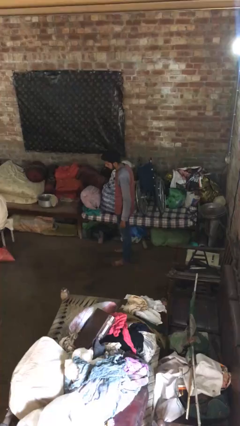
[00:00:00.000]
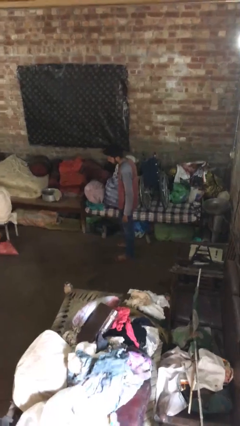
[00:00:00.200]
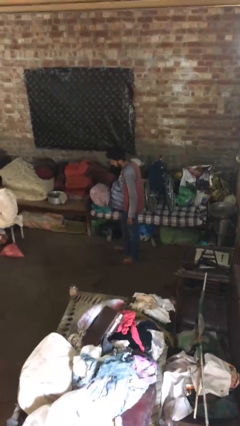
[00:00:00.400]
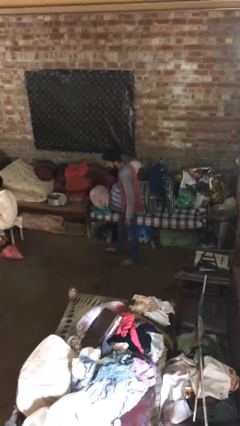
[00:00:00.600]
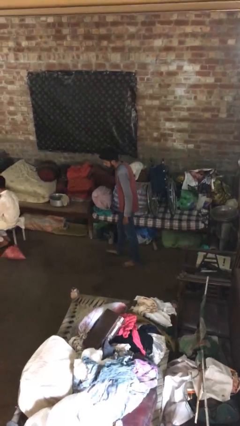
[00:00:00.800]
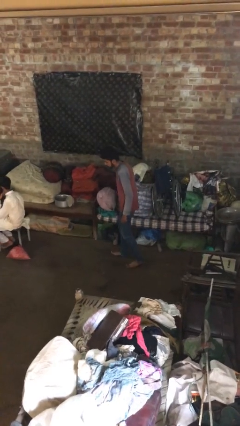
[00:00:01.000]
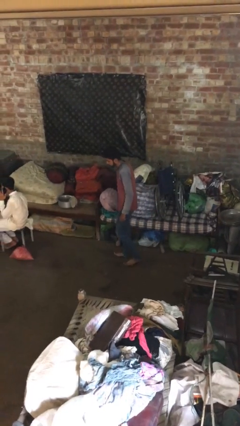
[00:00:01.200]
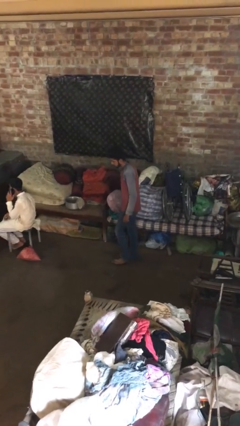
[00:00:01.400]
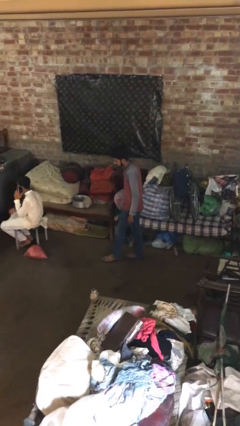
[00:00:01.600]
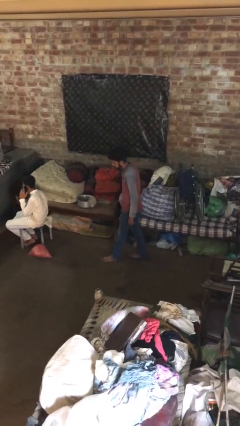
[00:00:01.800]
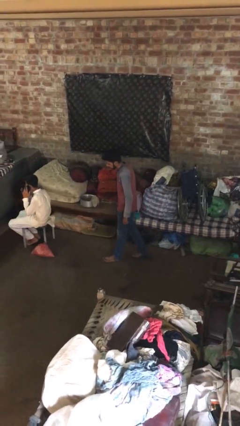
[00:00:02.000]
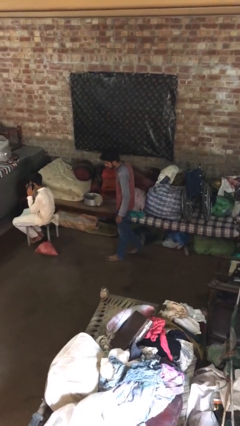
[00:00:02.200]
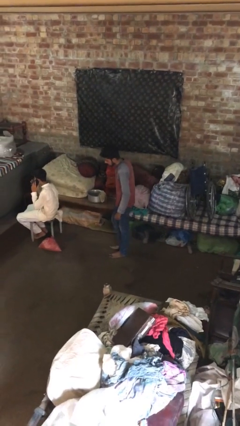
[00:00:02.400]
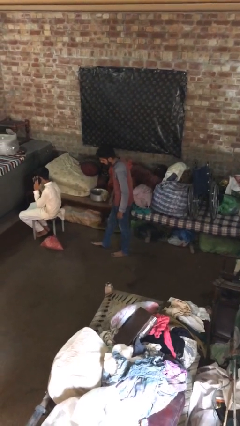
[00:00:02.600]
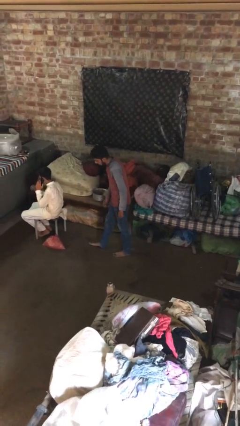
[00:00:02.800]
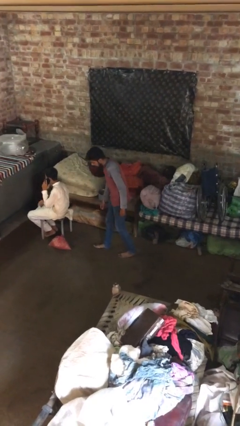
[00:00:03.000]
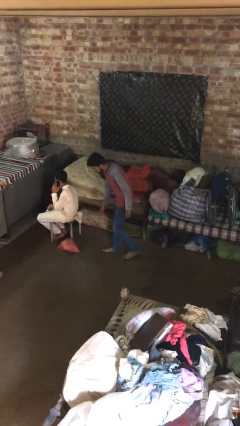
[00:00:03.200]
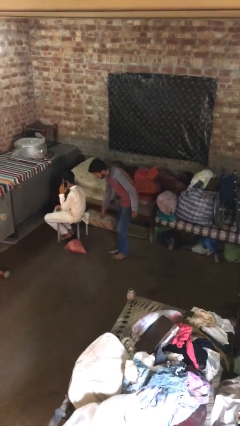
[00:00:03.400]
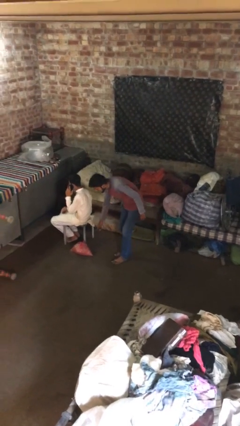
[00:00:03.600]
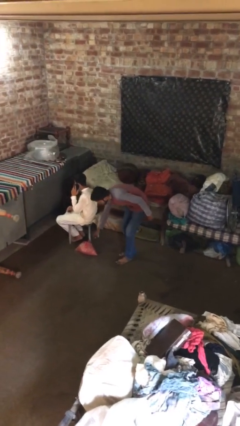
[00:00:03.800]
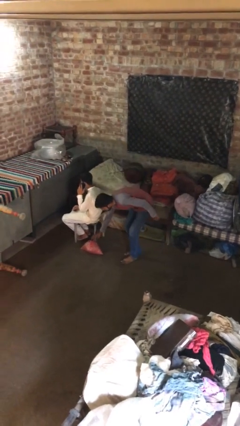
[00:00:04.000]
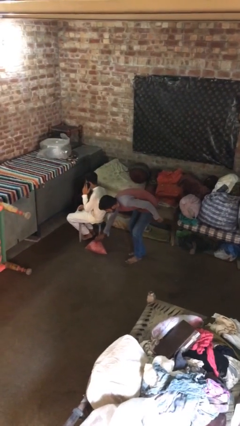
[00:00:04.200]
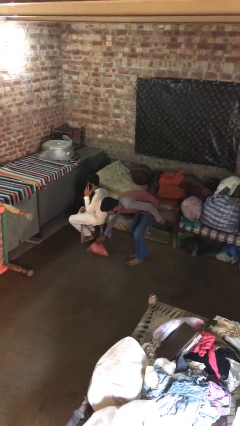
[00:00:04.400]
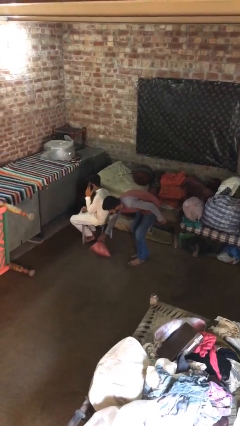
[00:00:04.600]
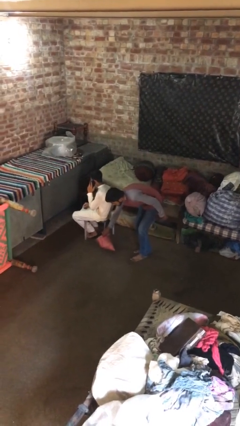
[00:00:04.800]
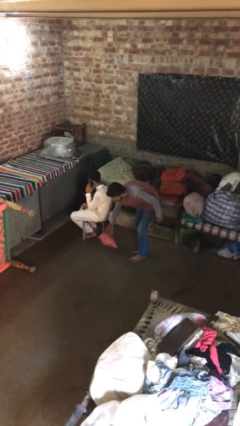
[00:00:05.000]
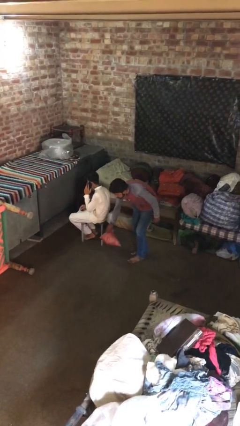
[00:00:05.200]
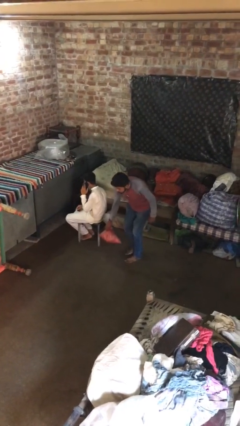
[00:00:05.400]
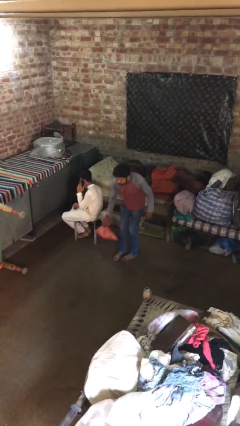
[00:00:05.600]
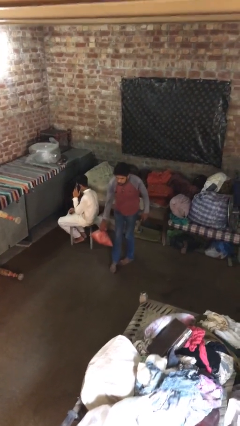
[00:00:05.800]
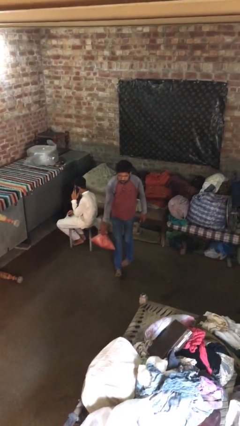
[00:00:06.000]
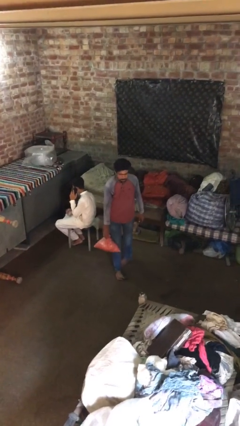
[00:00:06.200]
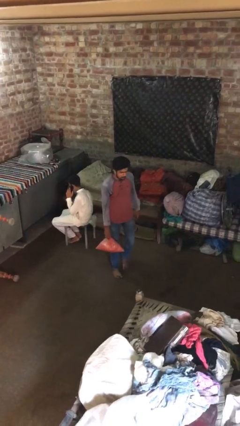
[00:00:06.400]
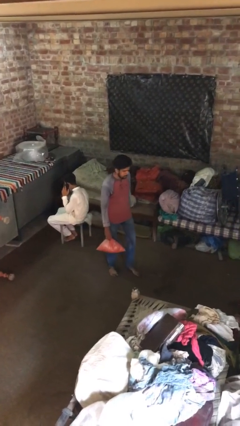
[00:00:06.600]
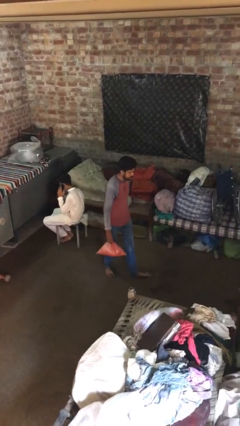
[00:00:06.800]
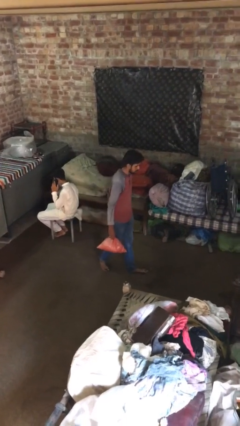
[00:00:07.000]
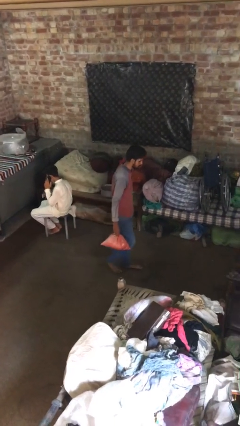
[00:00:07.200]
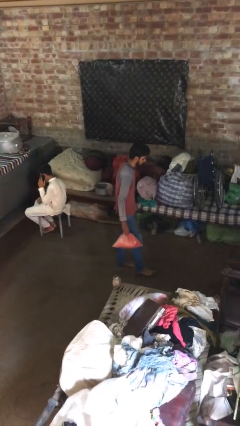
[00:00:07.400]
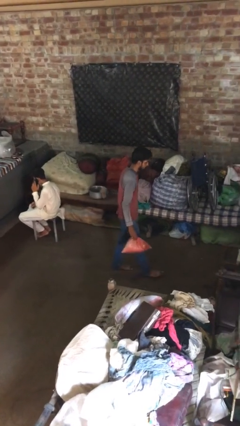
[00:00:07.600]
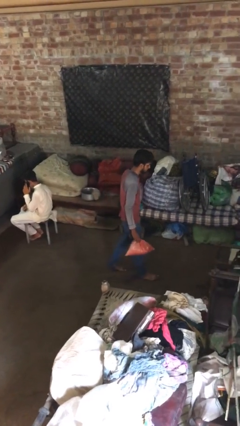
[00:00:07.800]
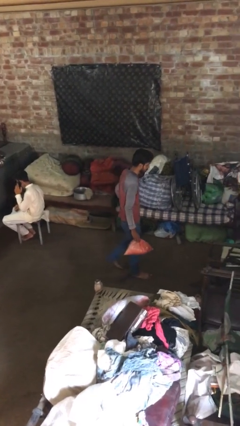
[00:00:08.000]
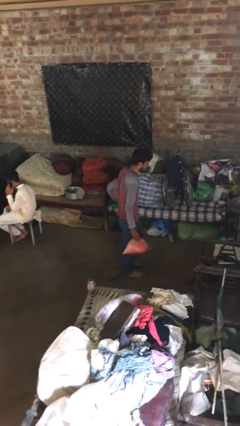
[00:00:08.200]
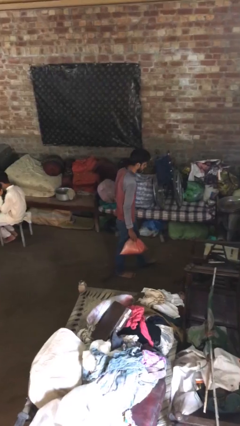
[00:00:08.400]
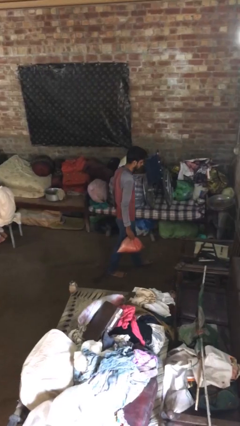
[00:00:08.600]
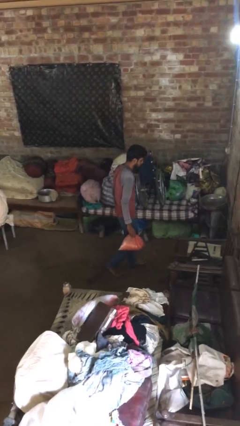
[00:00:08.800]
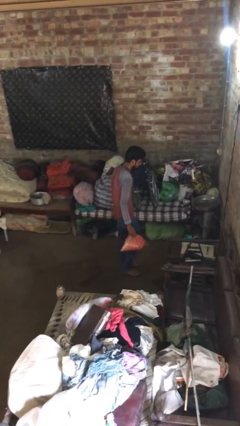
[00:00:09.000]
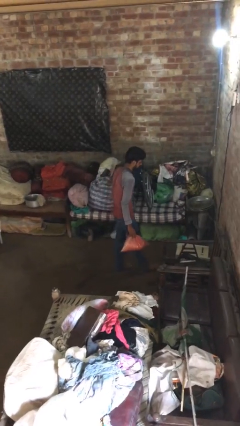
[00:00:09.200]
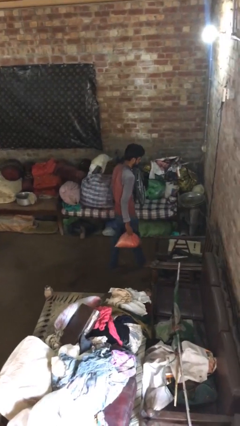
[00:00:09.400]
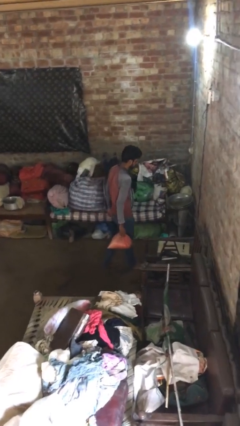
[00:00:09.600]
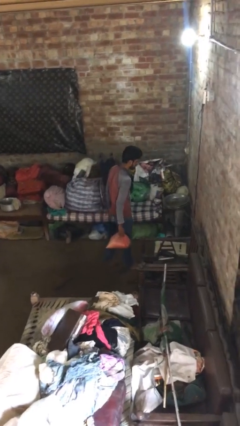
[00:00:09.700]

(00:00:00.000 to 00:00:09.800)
person steals object from person

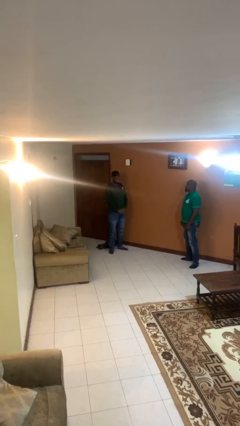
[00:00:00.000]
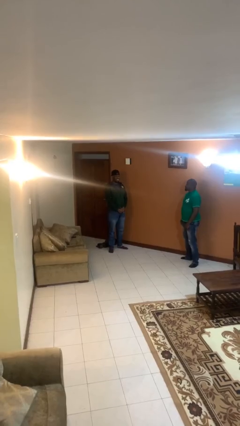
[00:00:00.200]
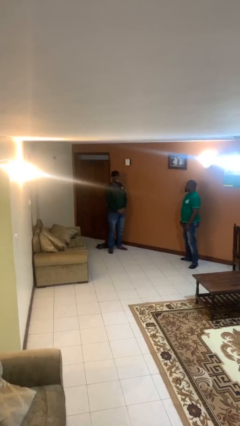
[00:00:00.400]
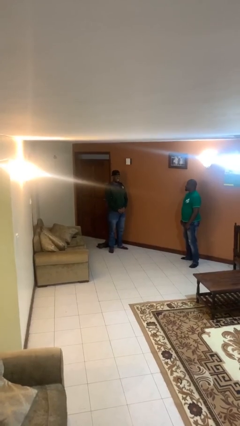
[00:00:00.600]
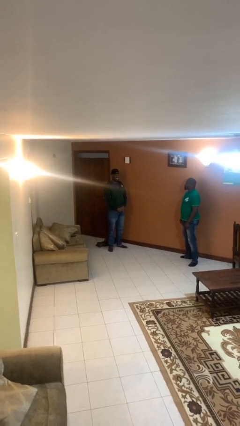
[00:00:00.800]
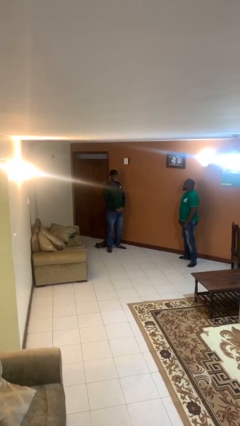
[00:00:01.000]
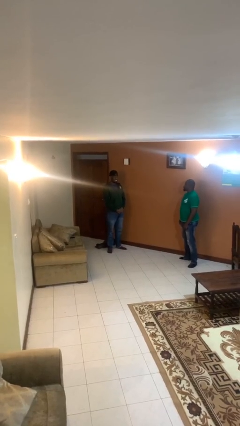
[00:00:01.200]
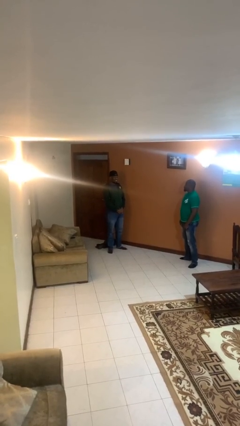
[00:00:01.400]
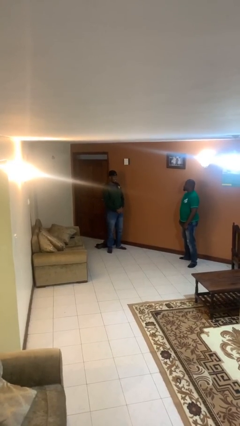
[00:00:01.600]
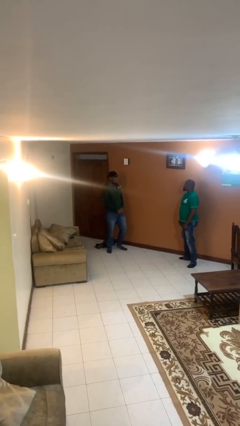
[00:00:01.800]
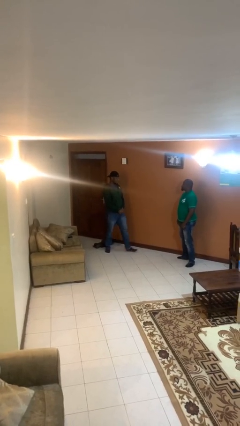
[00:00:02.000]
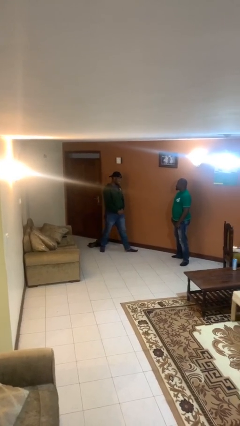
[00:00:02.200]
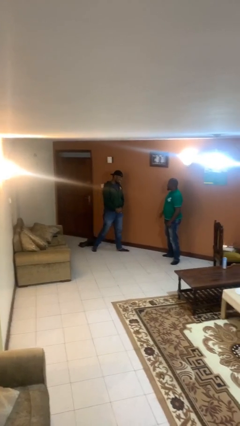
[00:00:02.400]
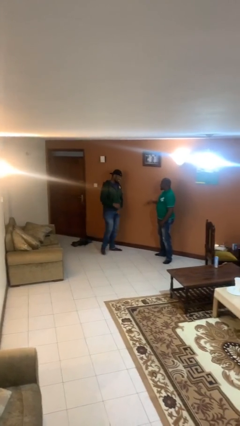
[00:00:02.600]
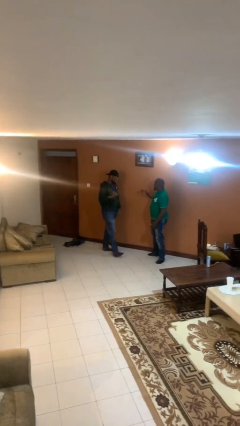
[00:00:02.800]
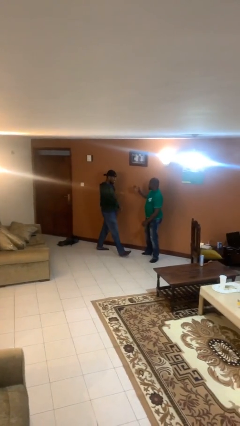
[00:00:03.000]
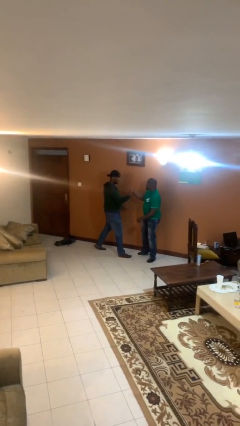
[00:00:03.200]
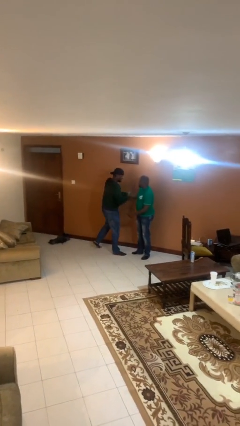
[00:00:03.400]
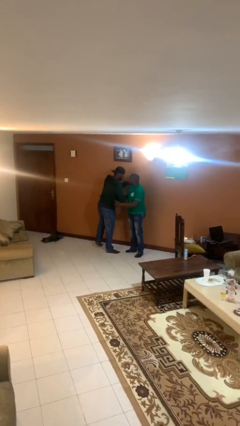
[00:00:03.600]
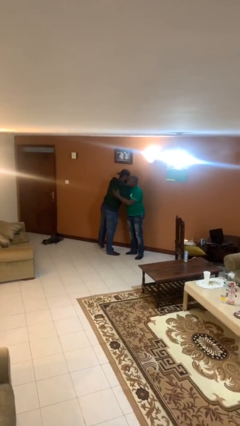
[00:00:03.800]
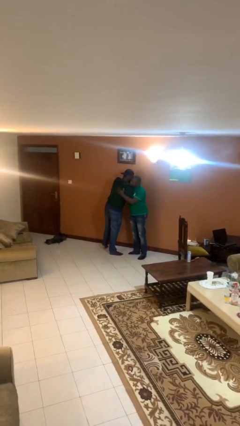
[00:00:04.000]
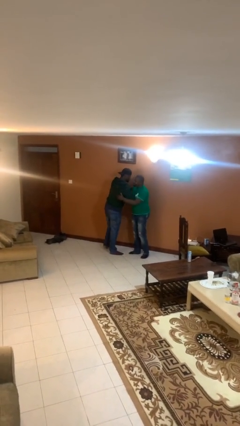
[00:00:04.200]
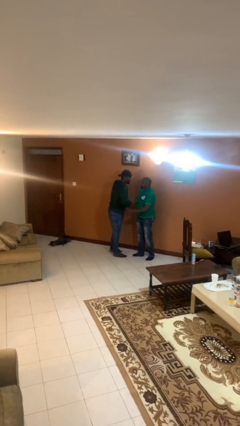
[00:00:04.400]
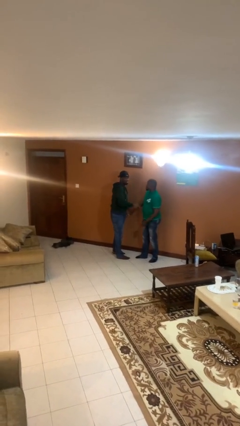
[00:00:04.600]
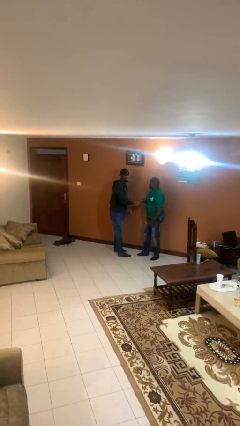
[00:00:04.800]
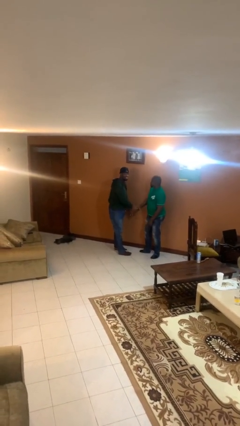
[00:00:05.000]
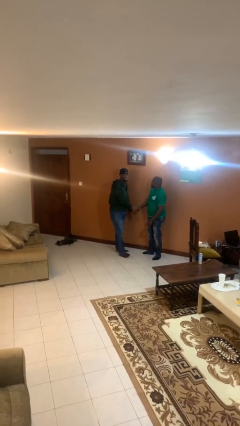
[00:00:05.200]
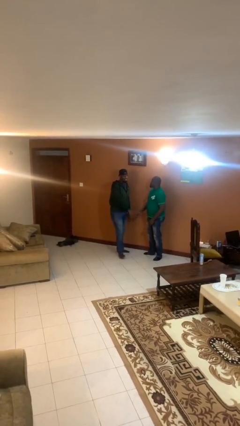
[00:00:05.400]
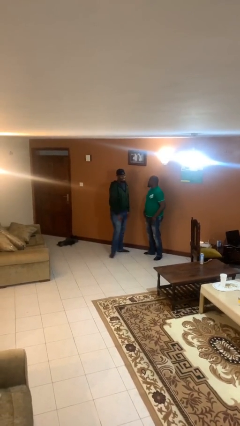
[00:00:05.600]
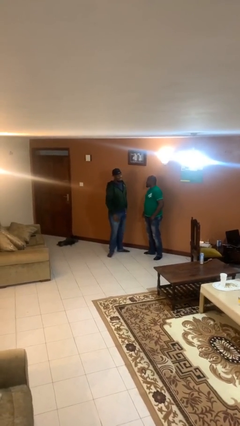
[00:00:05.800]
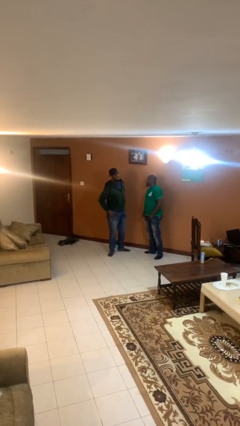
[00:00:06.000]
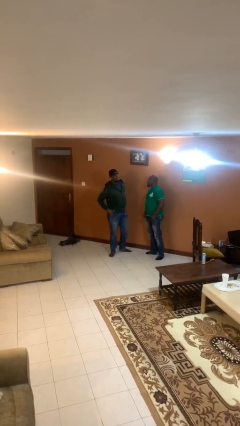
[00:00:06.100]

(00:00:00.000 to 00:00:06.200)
person embraces person

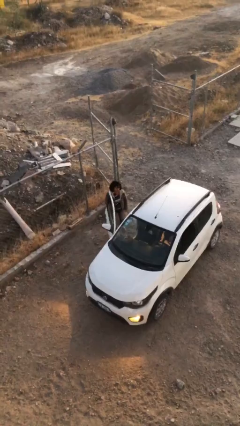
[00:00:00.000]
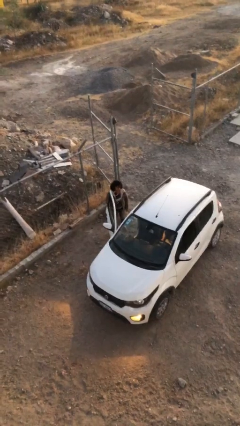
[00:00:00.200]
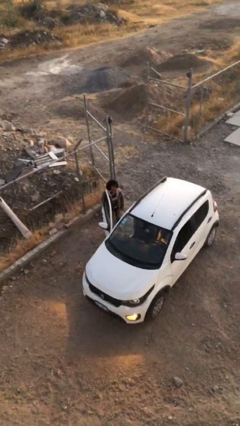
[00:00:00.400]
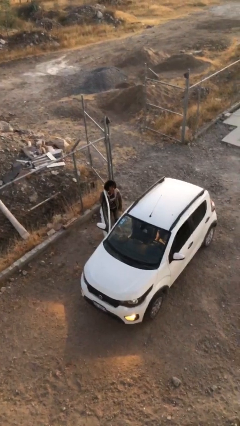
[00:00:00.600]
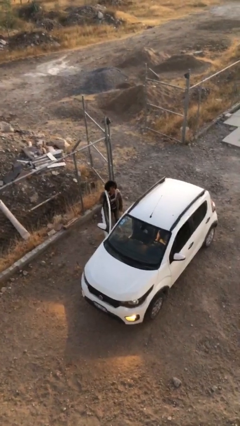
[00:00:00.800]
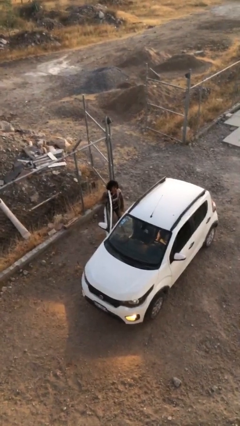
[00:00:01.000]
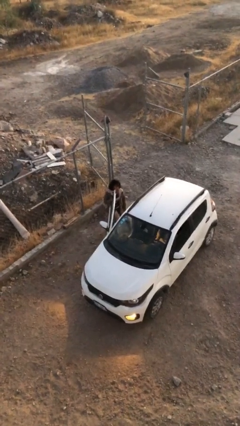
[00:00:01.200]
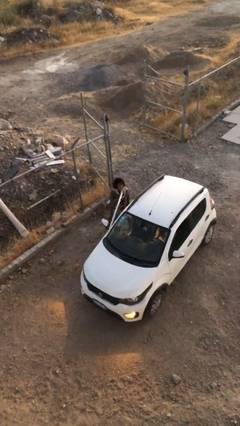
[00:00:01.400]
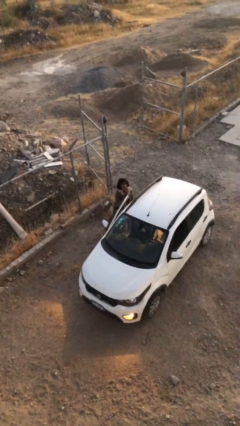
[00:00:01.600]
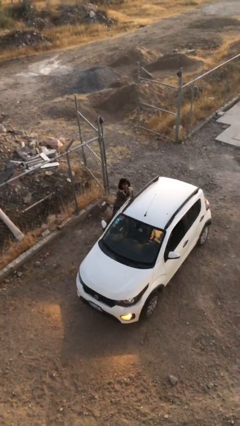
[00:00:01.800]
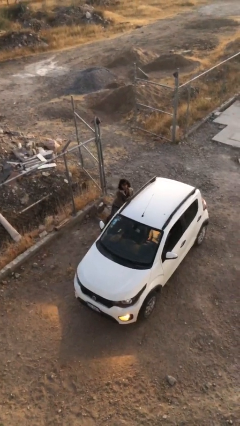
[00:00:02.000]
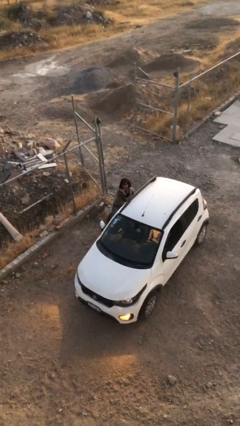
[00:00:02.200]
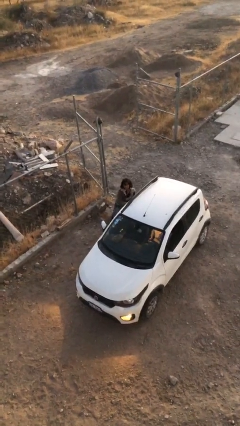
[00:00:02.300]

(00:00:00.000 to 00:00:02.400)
person closes car door
